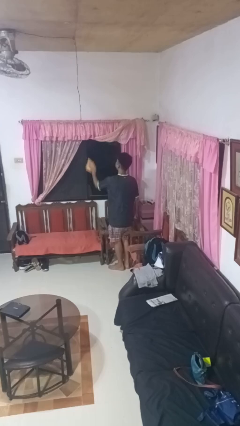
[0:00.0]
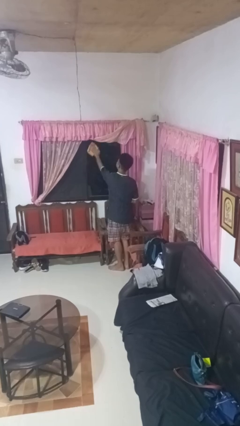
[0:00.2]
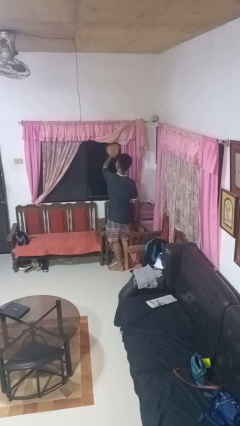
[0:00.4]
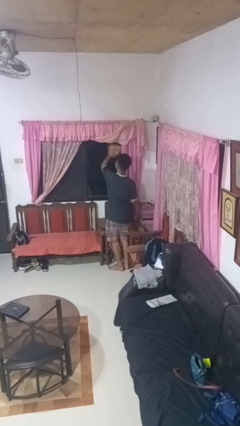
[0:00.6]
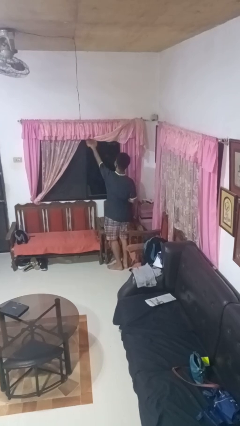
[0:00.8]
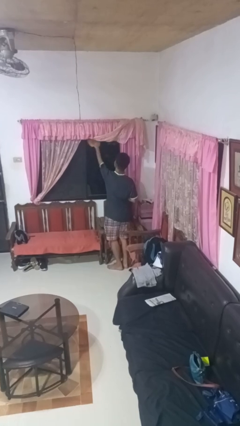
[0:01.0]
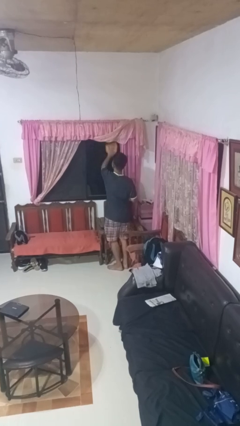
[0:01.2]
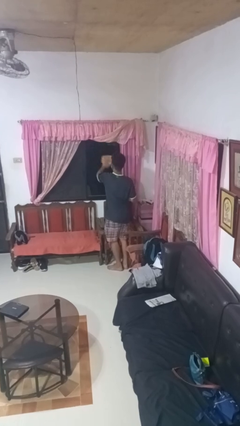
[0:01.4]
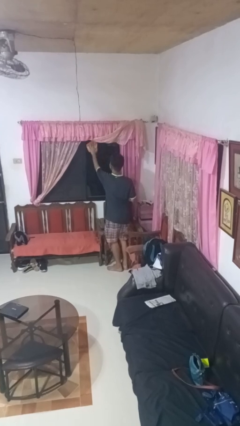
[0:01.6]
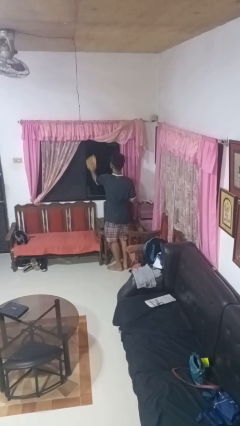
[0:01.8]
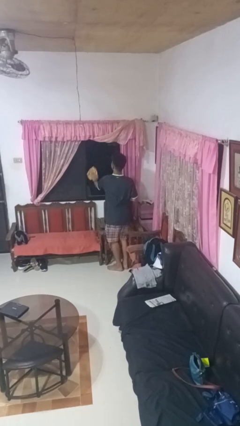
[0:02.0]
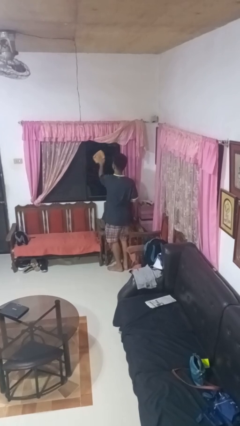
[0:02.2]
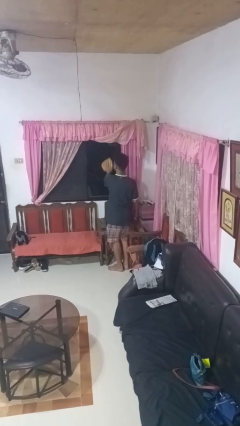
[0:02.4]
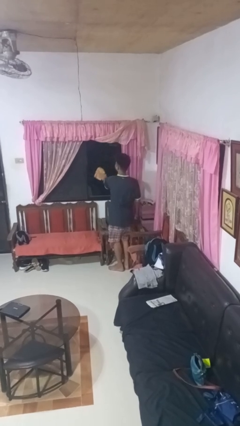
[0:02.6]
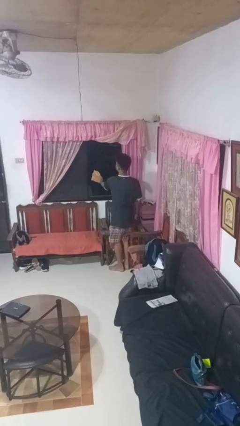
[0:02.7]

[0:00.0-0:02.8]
person washes window

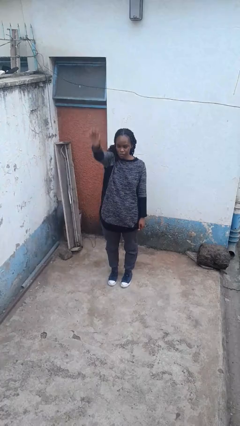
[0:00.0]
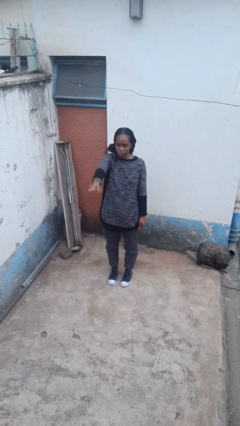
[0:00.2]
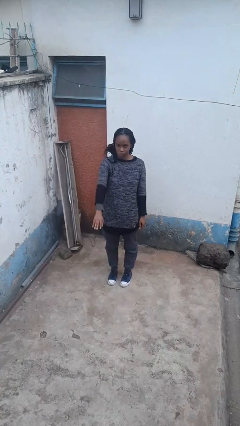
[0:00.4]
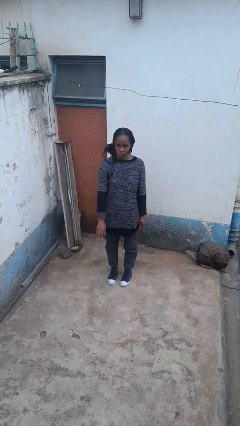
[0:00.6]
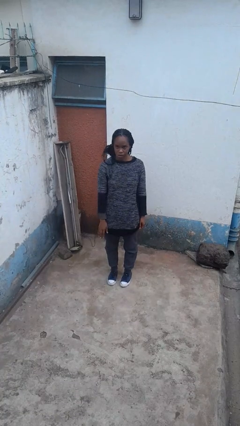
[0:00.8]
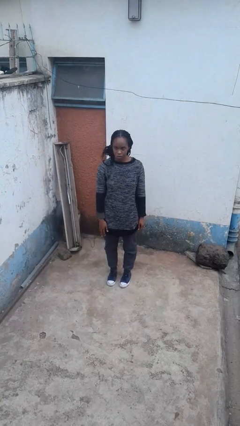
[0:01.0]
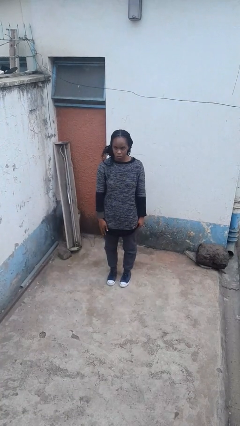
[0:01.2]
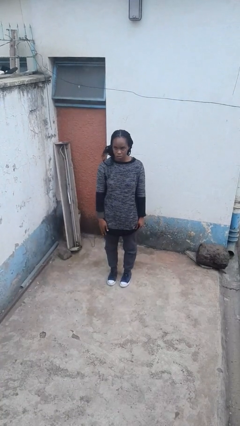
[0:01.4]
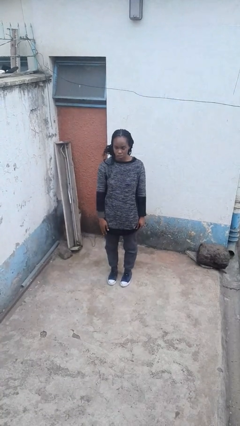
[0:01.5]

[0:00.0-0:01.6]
person gestures lower hand

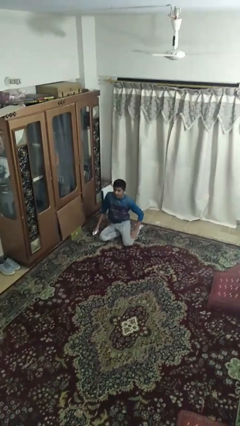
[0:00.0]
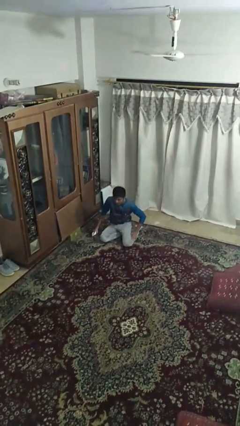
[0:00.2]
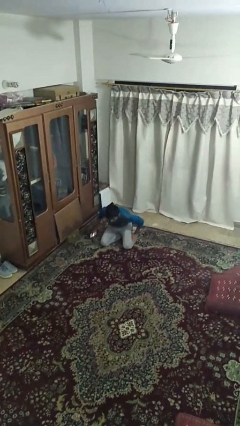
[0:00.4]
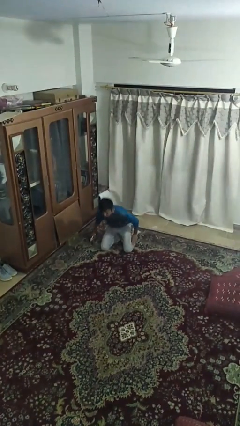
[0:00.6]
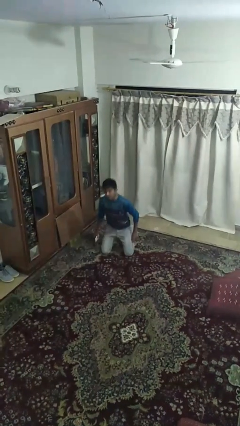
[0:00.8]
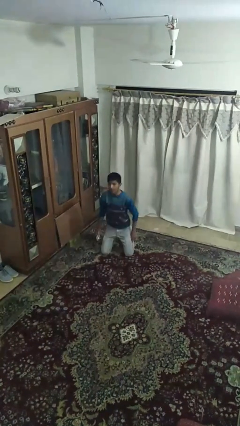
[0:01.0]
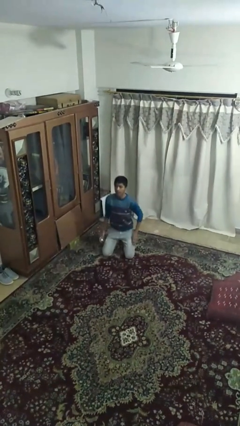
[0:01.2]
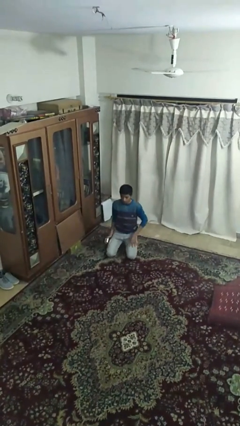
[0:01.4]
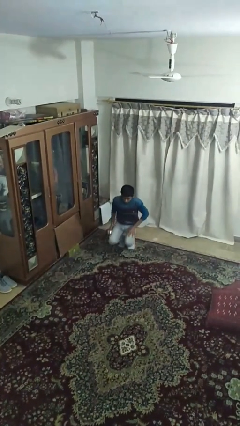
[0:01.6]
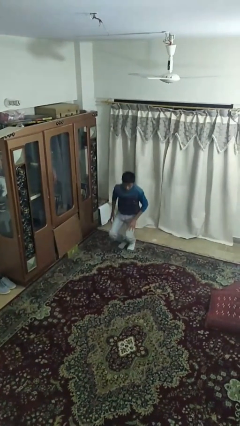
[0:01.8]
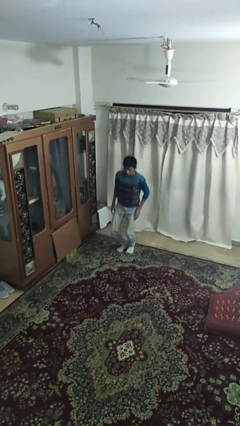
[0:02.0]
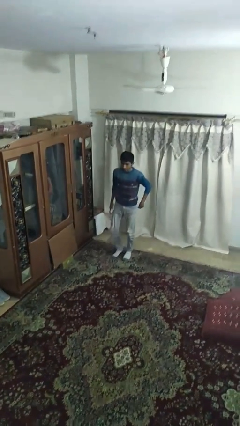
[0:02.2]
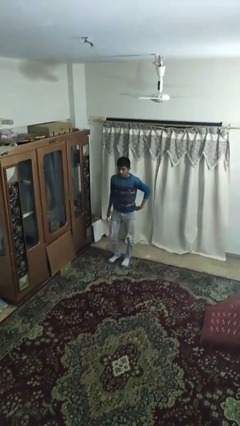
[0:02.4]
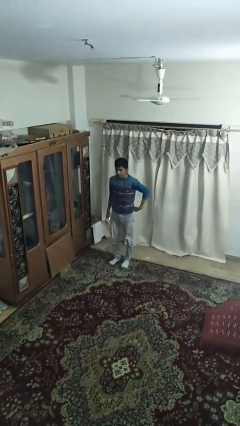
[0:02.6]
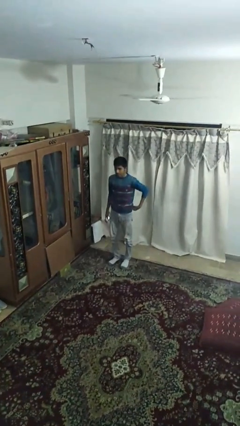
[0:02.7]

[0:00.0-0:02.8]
person stands up

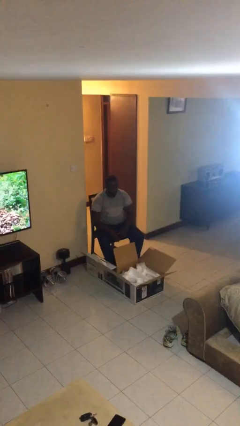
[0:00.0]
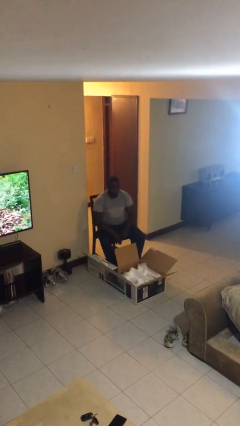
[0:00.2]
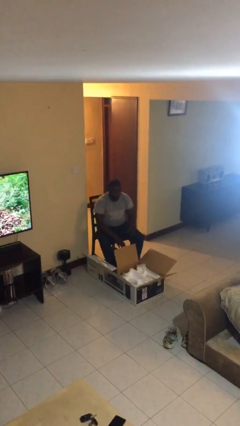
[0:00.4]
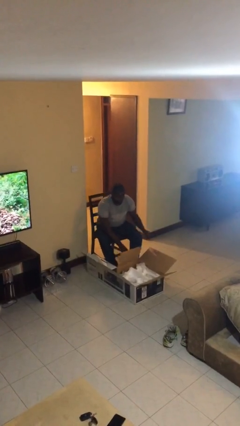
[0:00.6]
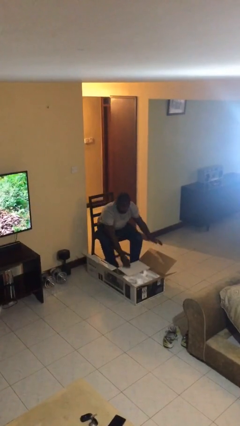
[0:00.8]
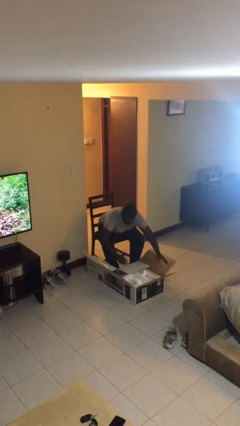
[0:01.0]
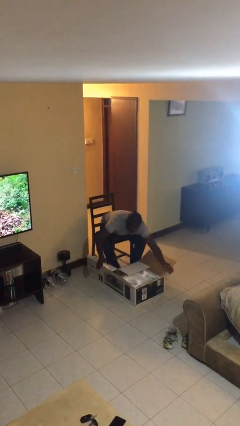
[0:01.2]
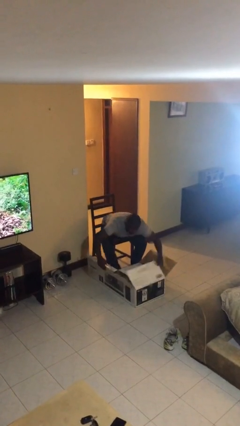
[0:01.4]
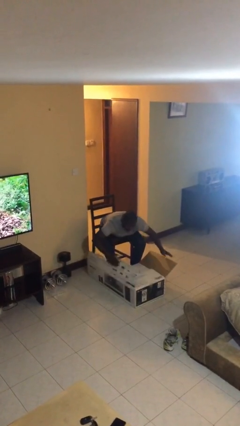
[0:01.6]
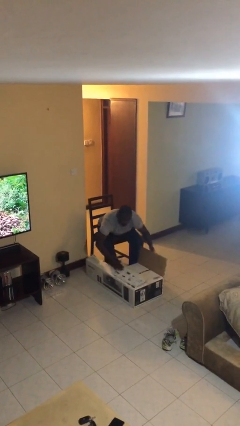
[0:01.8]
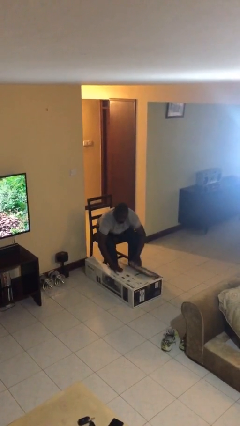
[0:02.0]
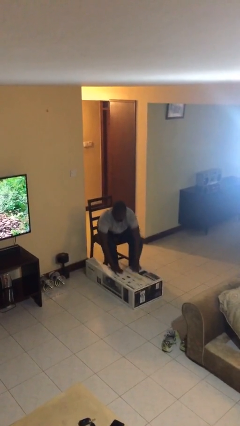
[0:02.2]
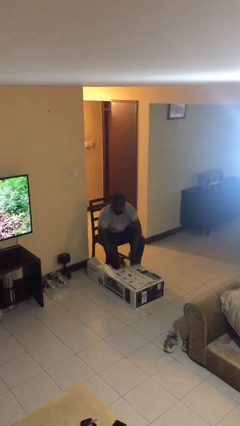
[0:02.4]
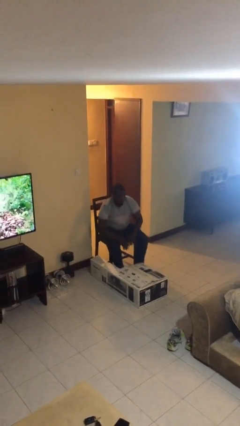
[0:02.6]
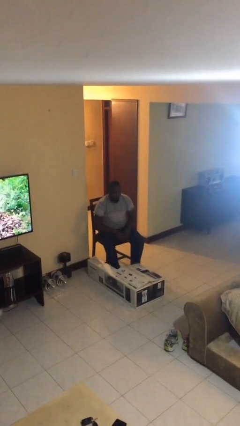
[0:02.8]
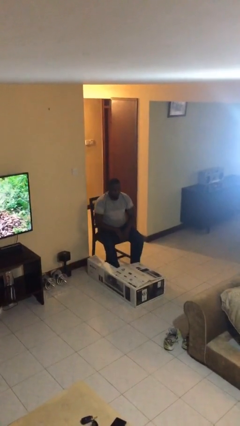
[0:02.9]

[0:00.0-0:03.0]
person closes box

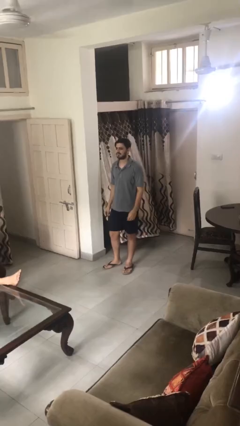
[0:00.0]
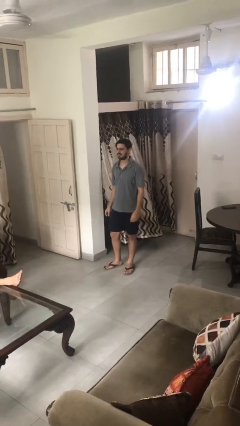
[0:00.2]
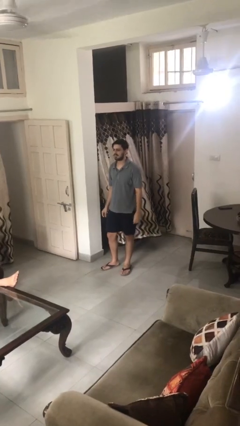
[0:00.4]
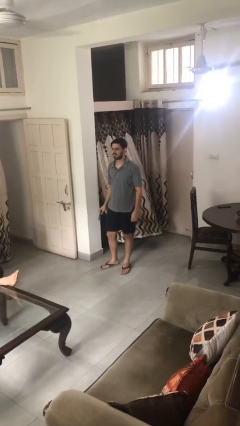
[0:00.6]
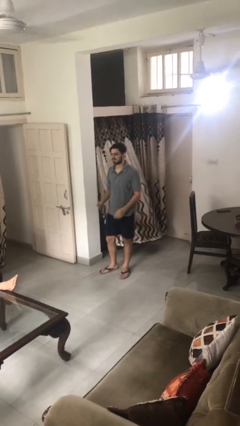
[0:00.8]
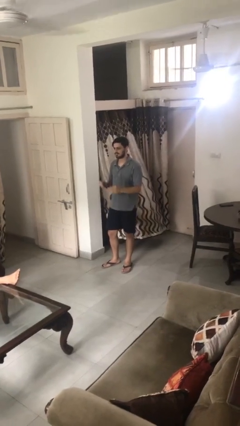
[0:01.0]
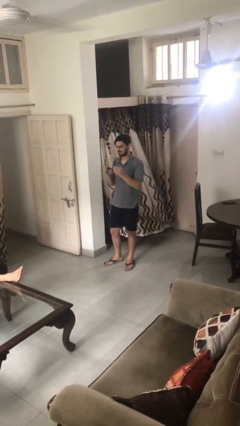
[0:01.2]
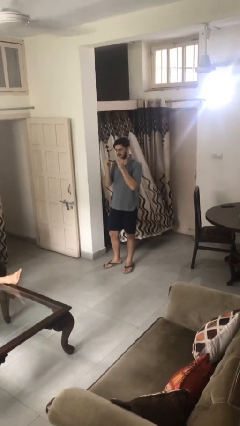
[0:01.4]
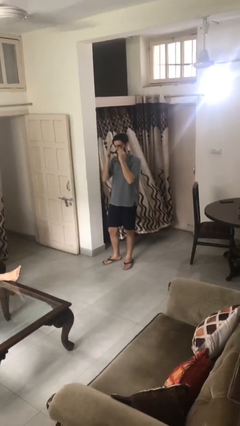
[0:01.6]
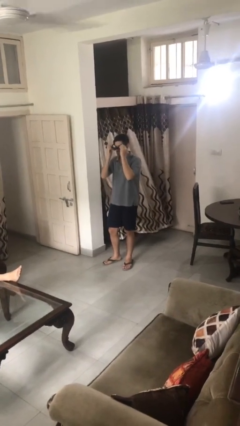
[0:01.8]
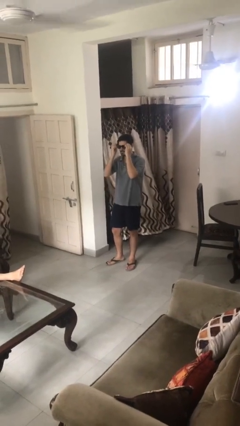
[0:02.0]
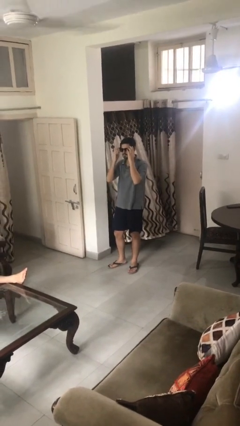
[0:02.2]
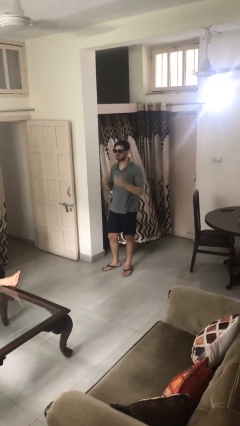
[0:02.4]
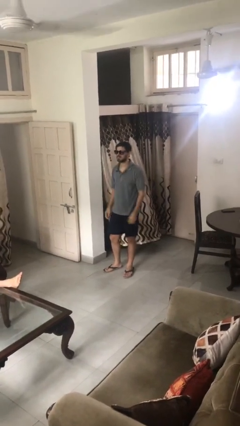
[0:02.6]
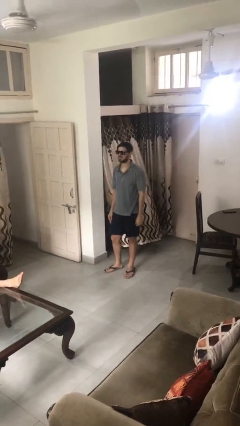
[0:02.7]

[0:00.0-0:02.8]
person puts on sunglasses

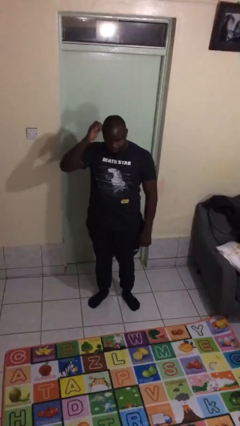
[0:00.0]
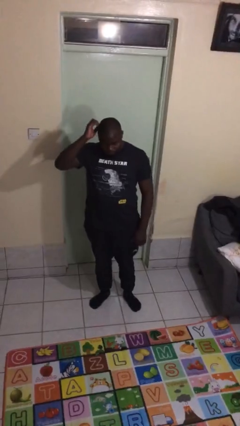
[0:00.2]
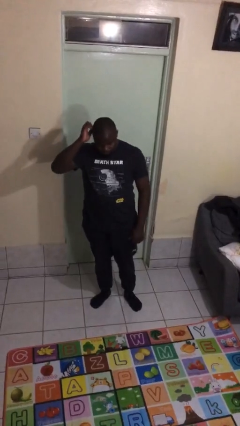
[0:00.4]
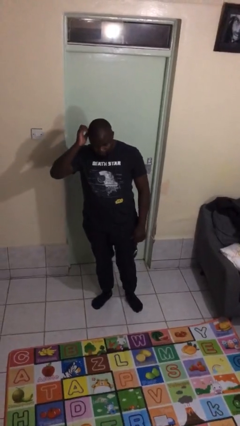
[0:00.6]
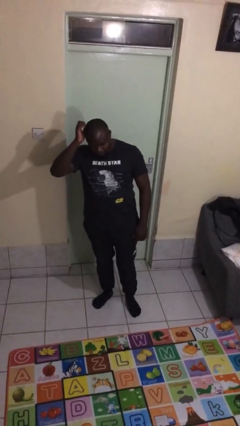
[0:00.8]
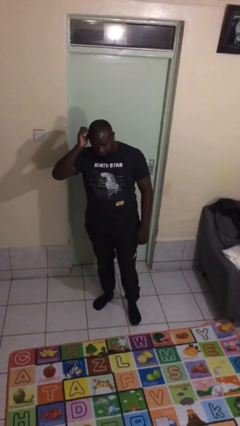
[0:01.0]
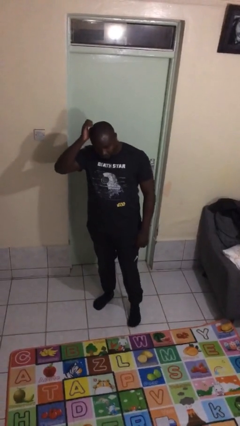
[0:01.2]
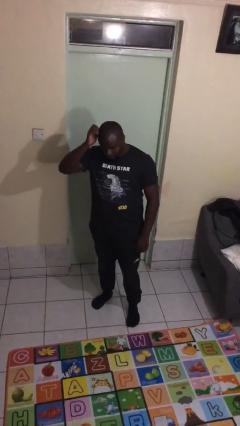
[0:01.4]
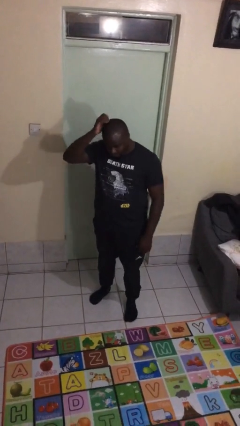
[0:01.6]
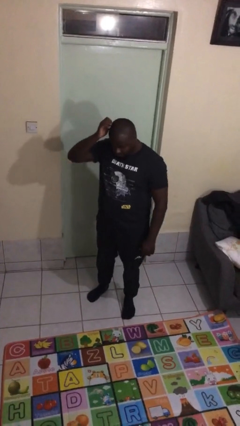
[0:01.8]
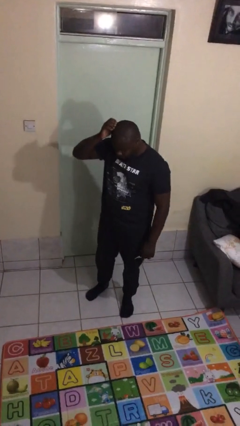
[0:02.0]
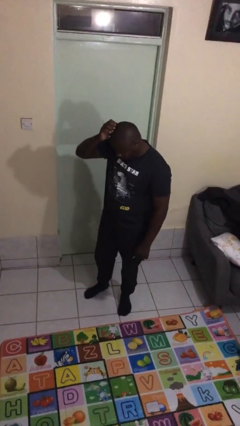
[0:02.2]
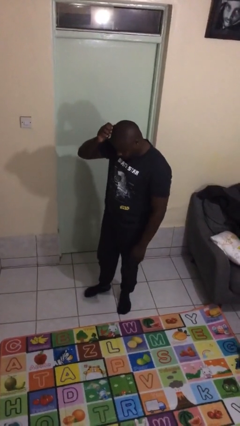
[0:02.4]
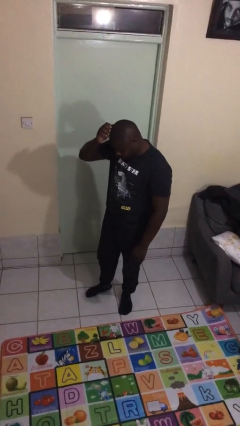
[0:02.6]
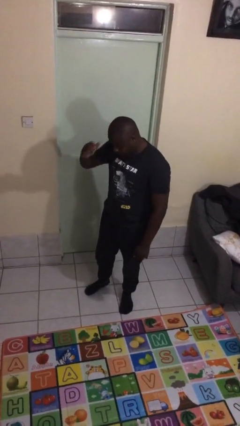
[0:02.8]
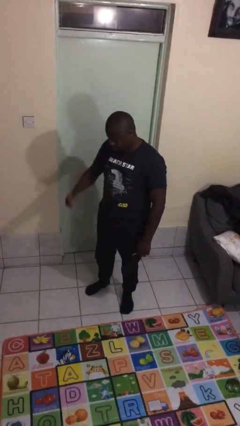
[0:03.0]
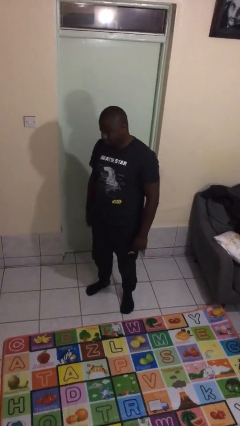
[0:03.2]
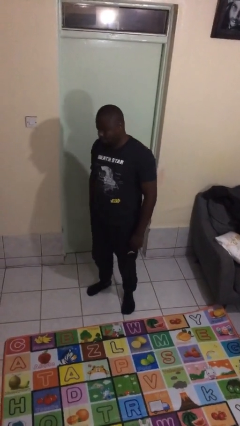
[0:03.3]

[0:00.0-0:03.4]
person scratches face

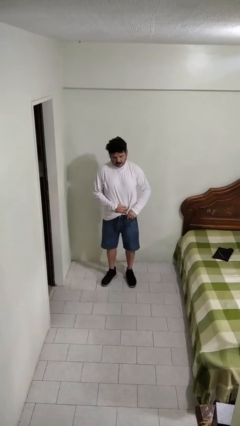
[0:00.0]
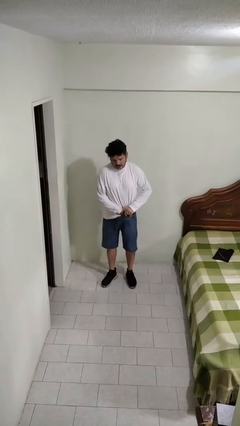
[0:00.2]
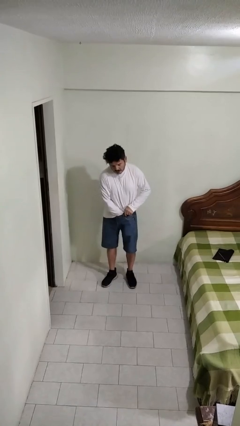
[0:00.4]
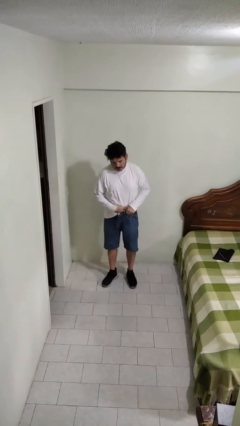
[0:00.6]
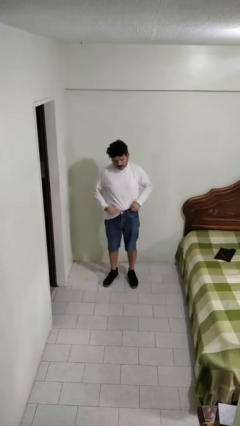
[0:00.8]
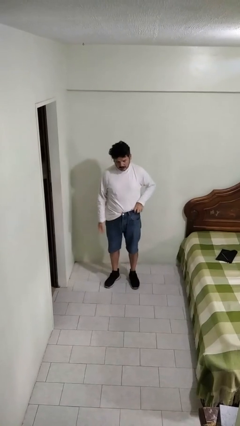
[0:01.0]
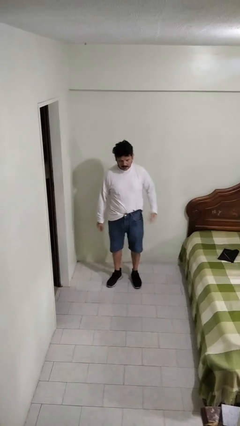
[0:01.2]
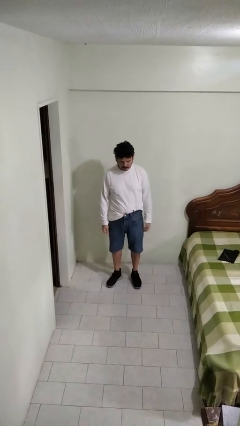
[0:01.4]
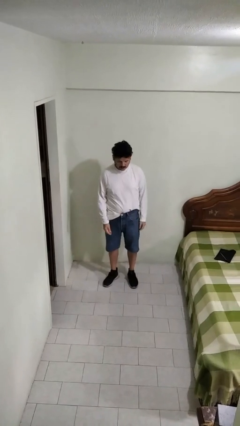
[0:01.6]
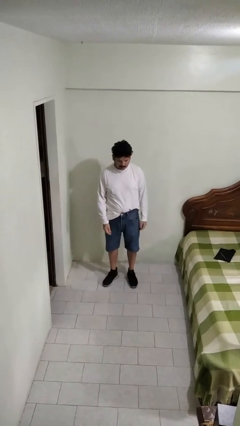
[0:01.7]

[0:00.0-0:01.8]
person tucks in shirt
